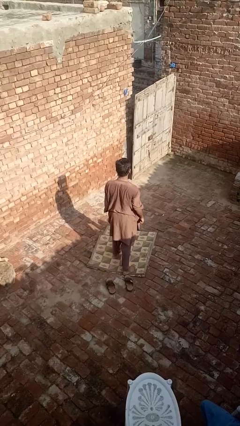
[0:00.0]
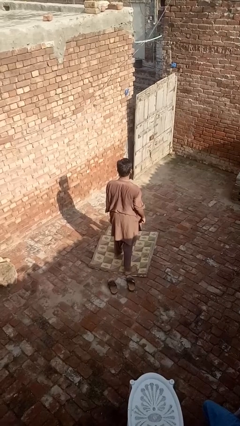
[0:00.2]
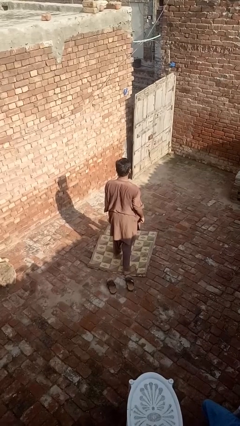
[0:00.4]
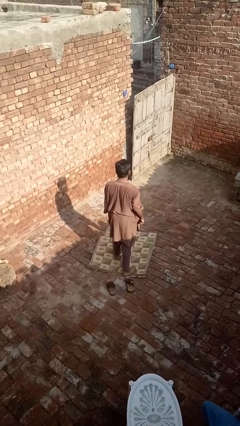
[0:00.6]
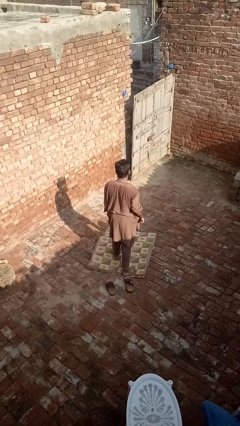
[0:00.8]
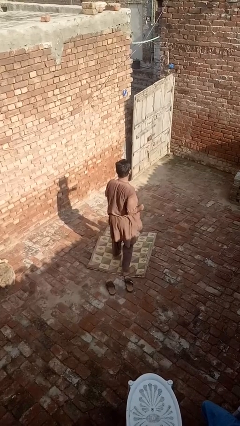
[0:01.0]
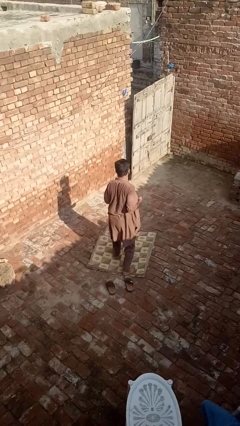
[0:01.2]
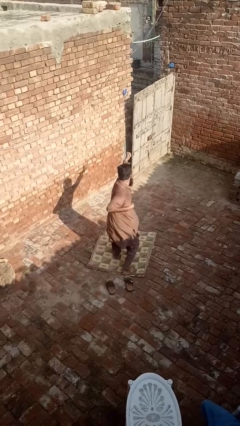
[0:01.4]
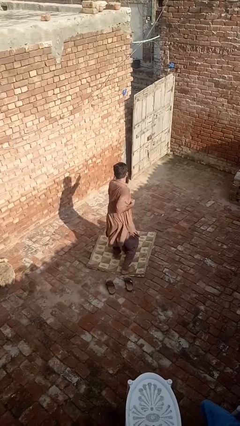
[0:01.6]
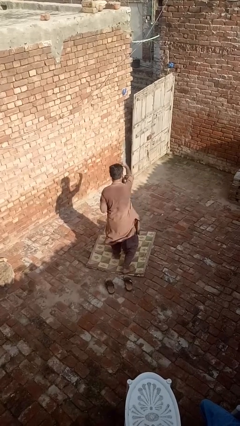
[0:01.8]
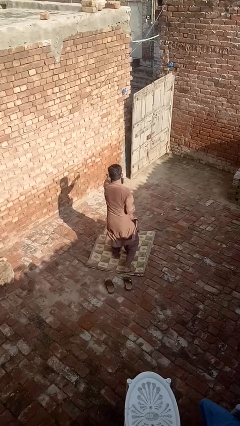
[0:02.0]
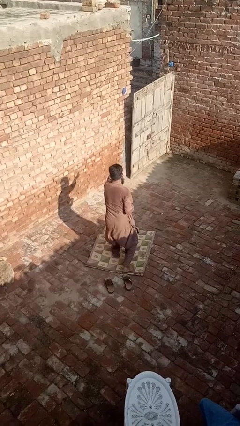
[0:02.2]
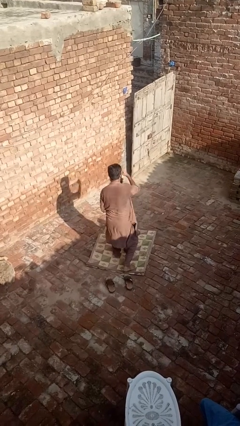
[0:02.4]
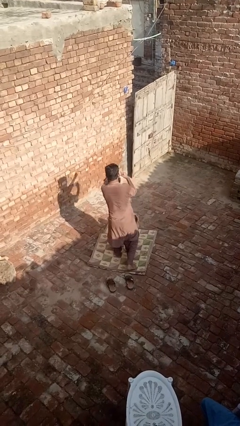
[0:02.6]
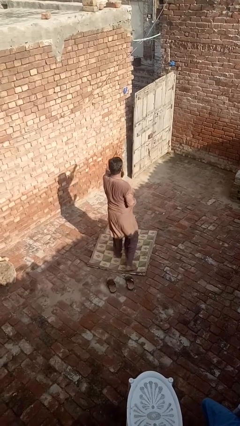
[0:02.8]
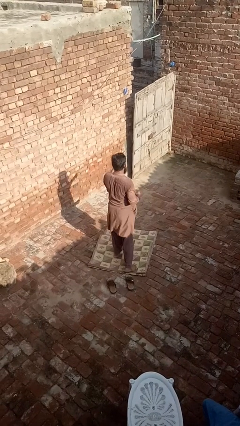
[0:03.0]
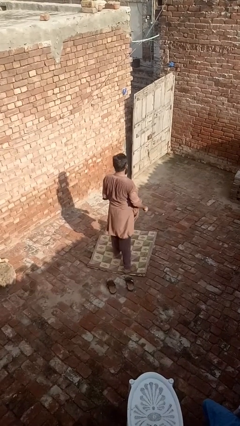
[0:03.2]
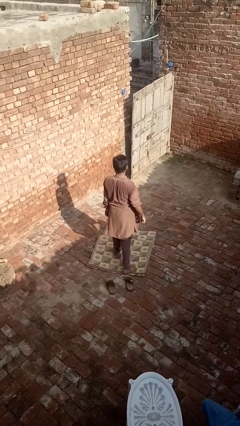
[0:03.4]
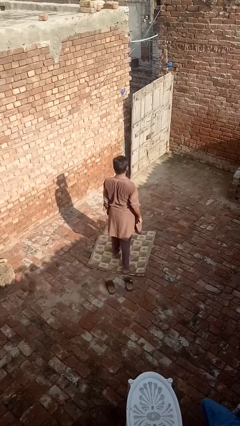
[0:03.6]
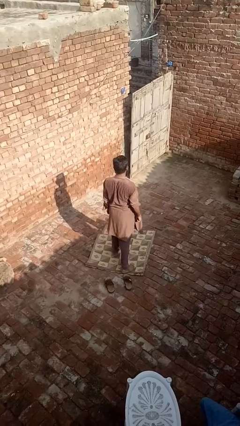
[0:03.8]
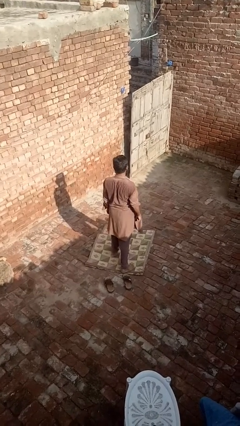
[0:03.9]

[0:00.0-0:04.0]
person punches

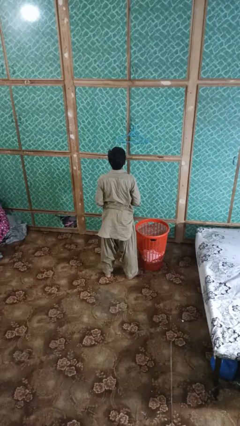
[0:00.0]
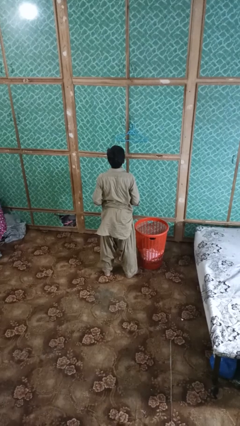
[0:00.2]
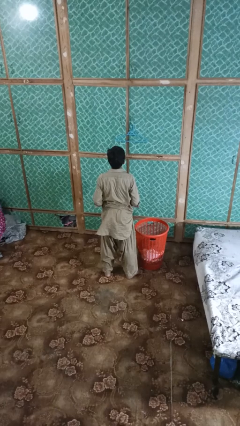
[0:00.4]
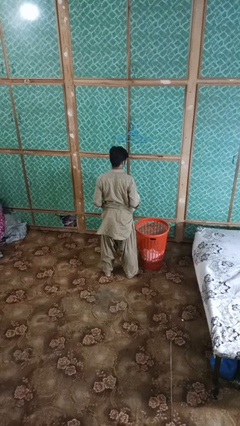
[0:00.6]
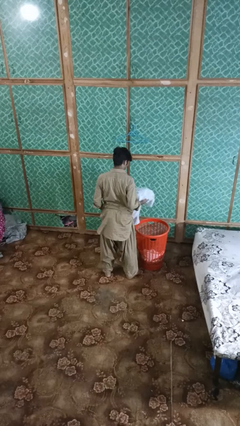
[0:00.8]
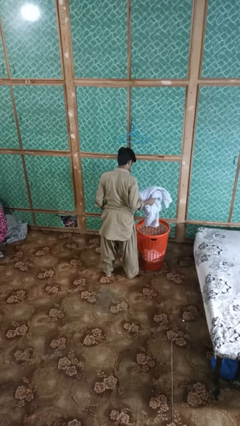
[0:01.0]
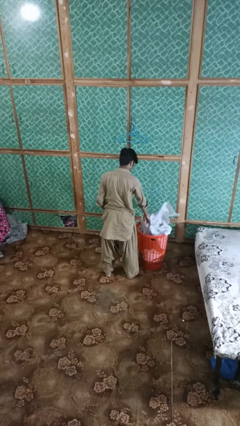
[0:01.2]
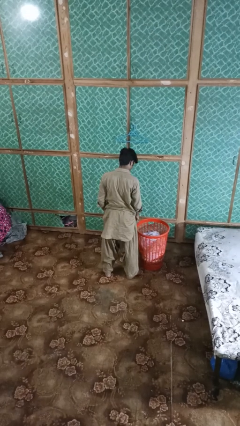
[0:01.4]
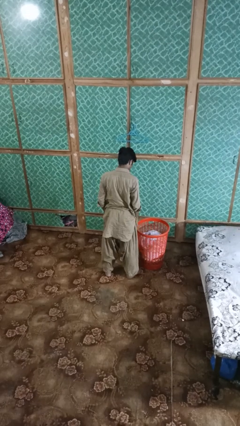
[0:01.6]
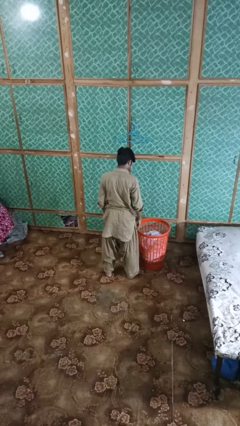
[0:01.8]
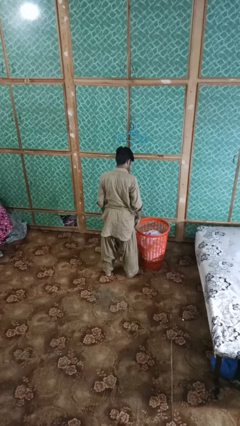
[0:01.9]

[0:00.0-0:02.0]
person puts object into basket

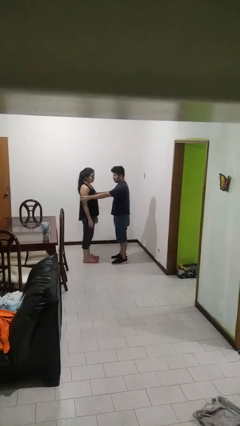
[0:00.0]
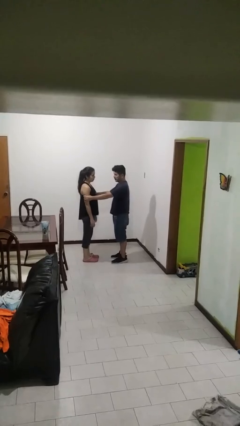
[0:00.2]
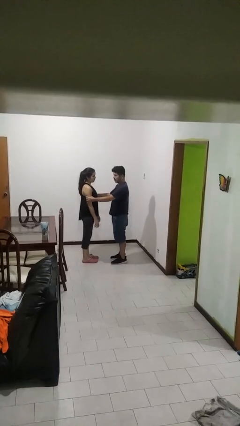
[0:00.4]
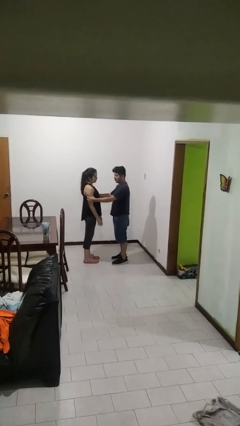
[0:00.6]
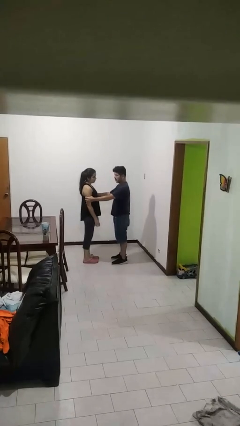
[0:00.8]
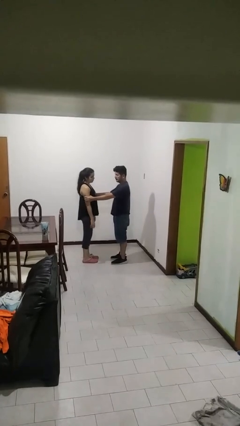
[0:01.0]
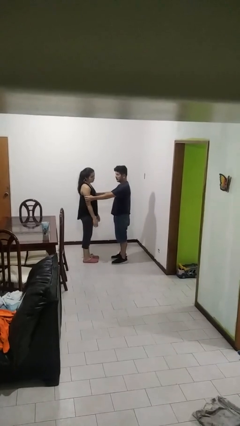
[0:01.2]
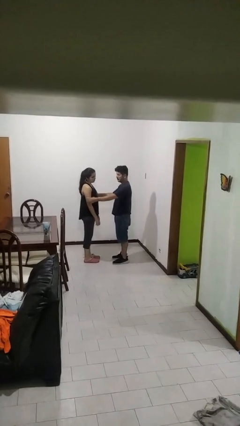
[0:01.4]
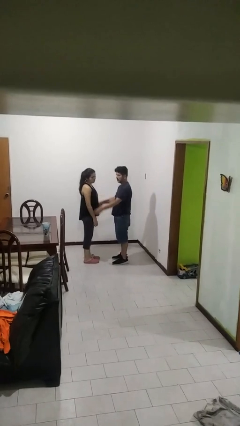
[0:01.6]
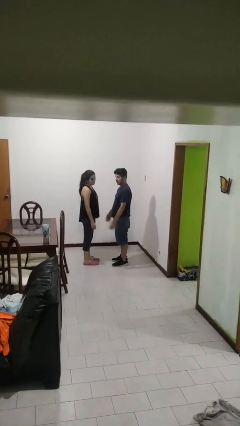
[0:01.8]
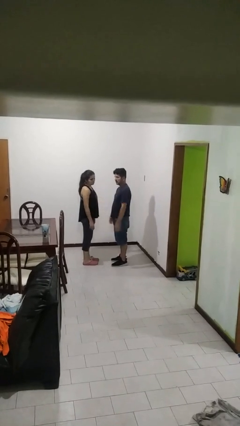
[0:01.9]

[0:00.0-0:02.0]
person grabs person by bicep

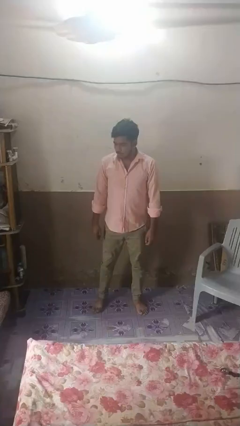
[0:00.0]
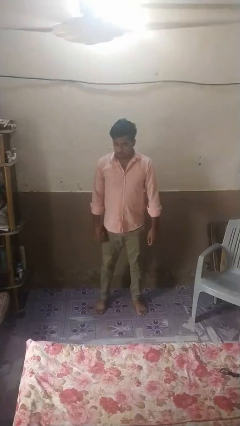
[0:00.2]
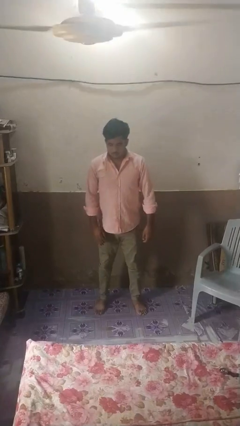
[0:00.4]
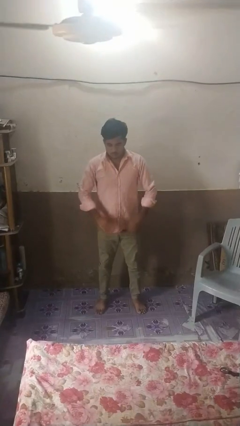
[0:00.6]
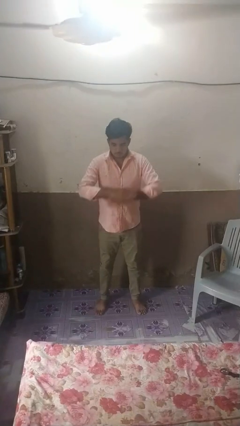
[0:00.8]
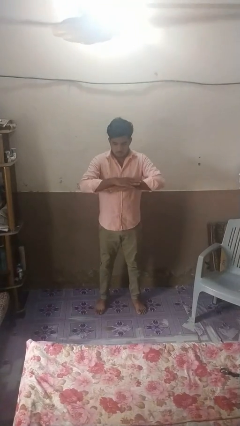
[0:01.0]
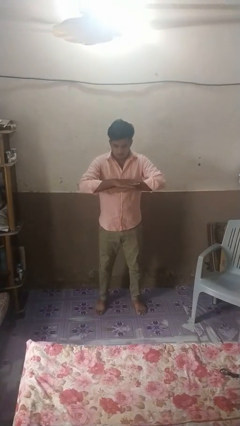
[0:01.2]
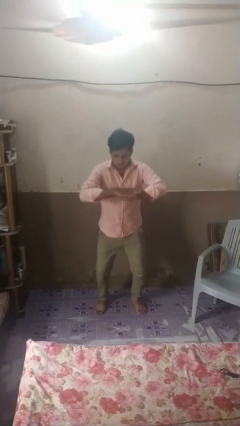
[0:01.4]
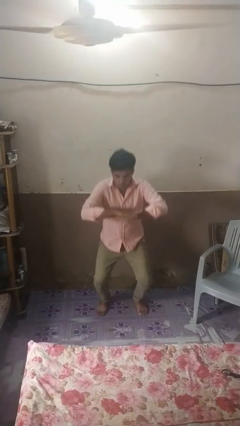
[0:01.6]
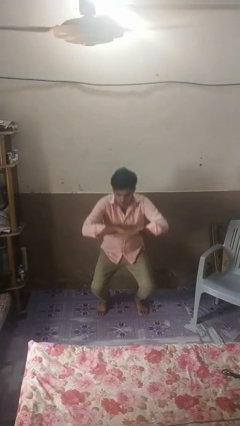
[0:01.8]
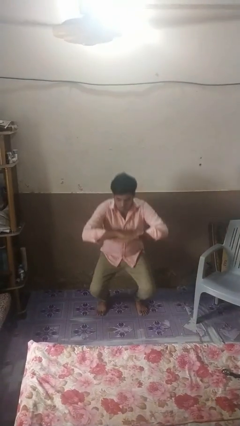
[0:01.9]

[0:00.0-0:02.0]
person squats

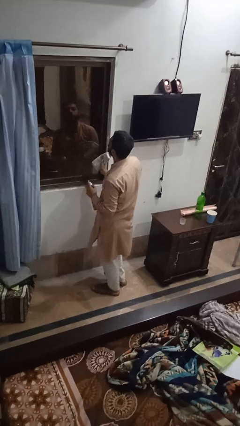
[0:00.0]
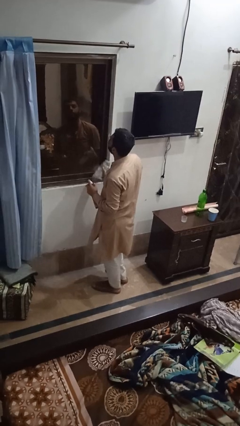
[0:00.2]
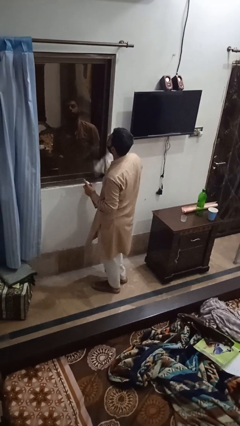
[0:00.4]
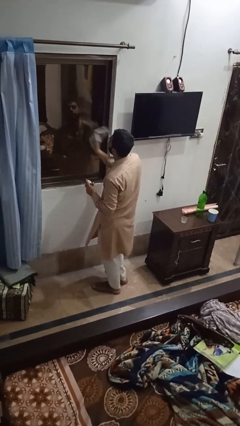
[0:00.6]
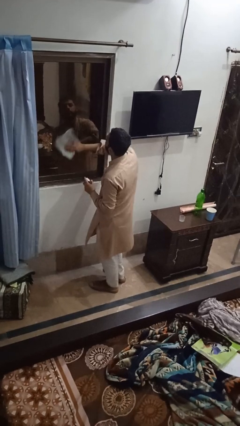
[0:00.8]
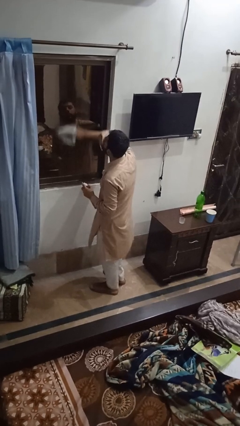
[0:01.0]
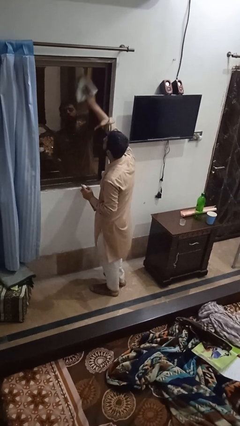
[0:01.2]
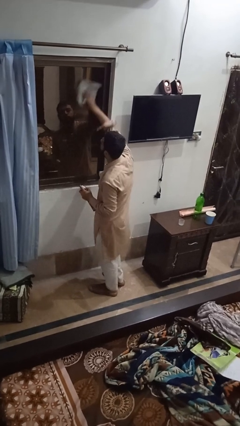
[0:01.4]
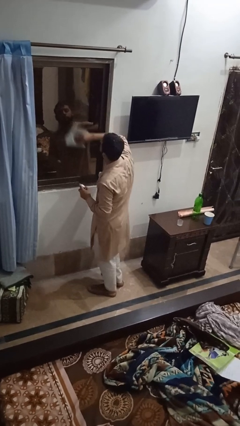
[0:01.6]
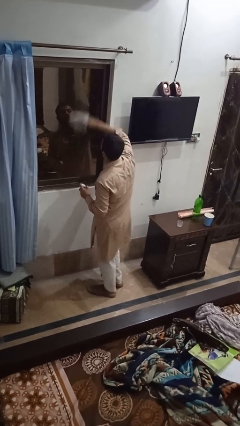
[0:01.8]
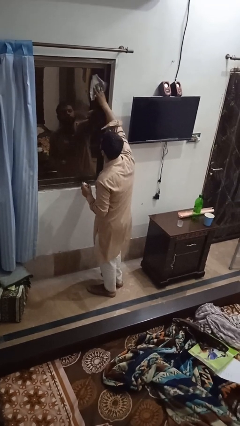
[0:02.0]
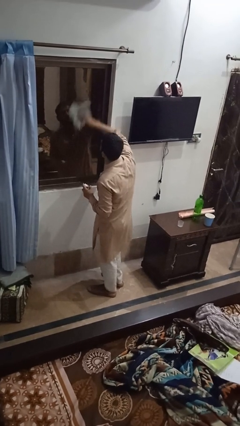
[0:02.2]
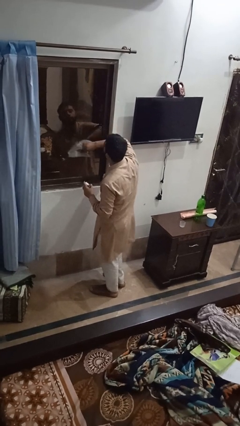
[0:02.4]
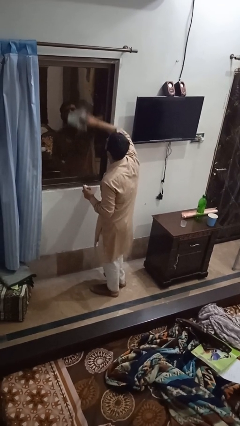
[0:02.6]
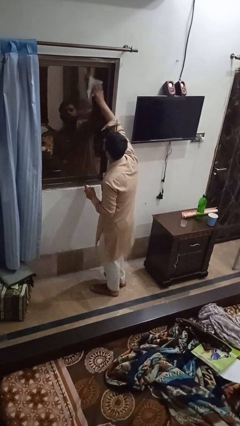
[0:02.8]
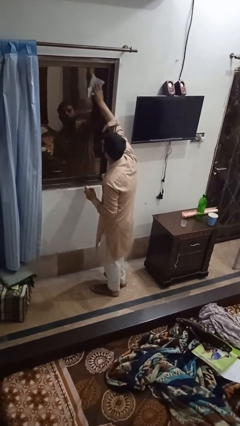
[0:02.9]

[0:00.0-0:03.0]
person washes window

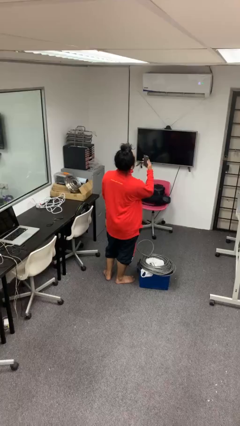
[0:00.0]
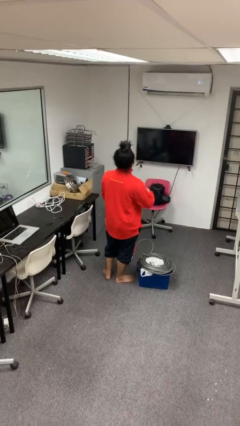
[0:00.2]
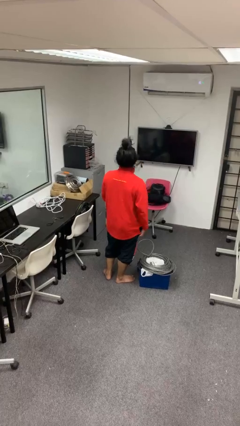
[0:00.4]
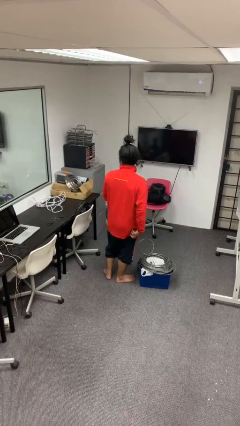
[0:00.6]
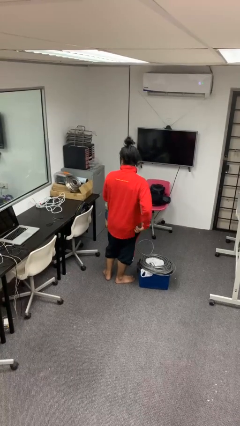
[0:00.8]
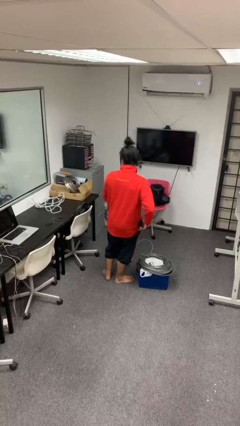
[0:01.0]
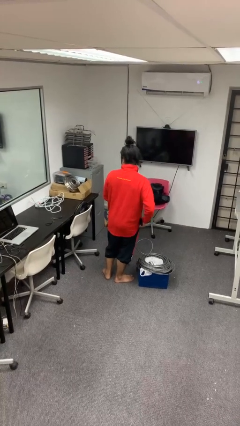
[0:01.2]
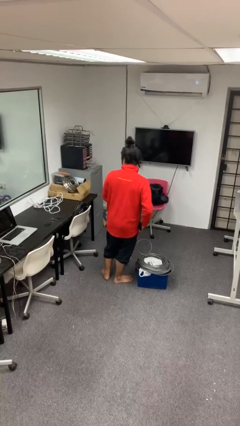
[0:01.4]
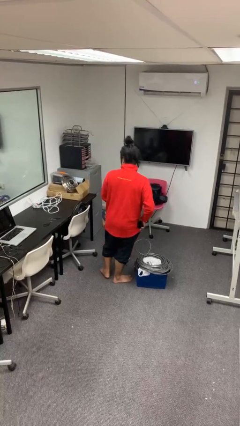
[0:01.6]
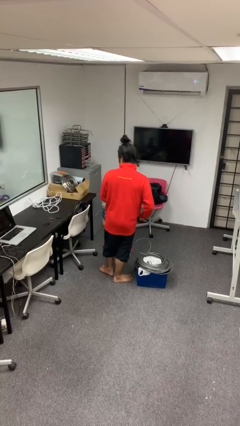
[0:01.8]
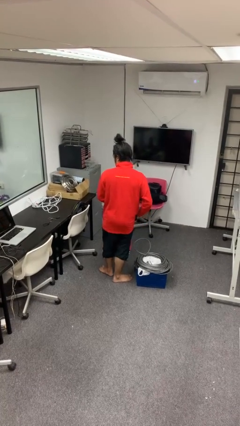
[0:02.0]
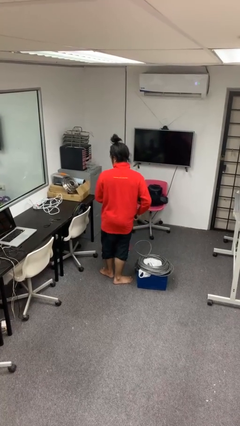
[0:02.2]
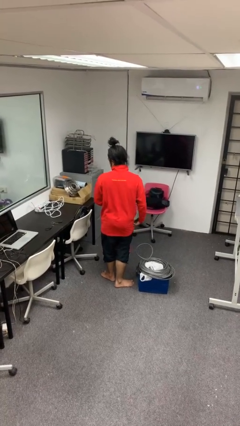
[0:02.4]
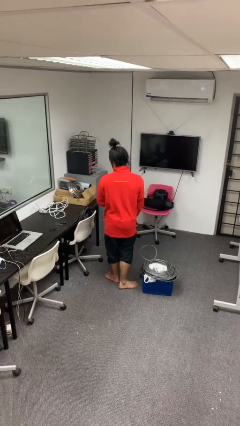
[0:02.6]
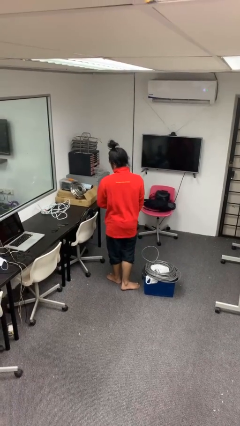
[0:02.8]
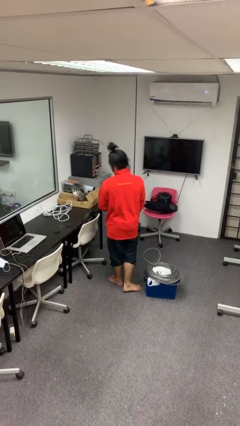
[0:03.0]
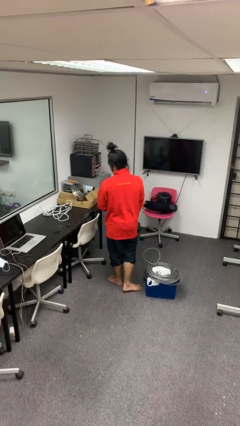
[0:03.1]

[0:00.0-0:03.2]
person puts phone into pocket

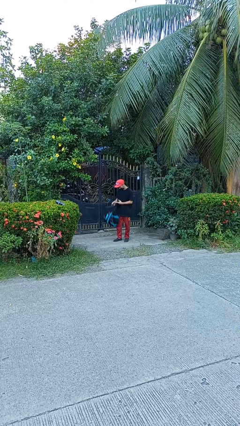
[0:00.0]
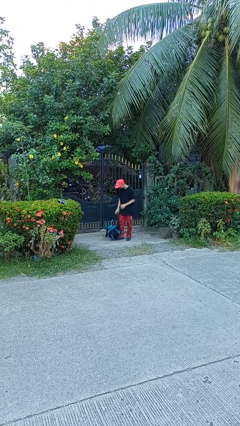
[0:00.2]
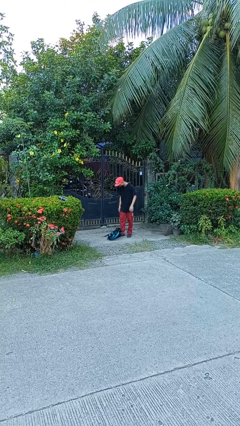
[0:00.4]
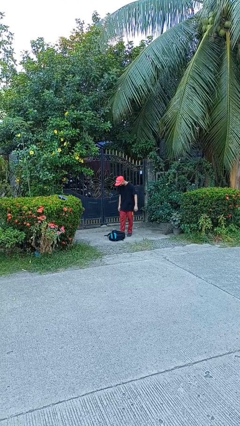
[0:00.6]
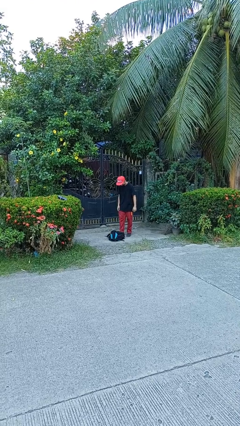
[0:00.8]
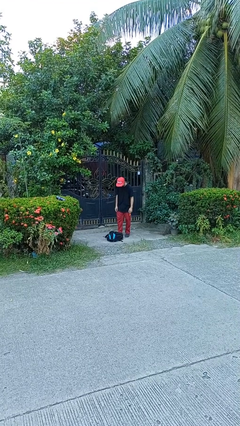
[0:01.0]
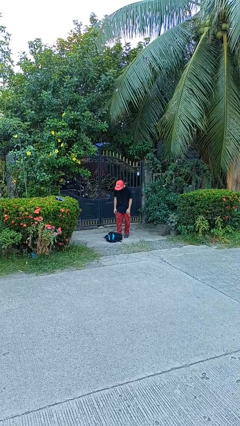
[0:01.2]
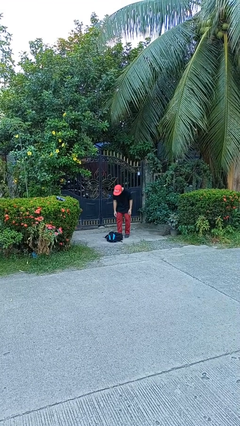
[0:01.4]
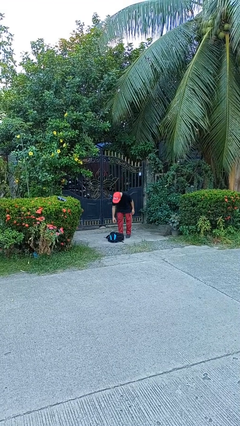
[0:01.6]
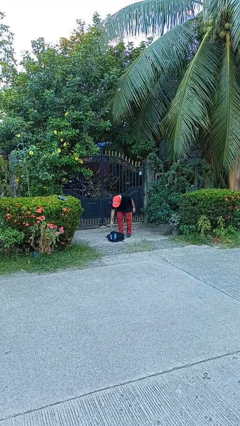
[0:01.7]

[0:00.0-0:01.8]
person drops object
